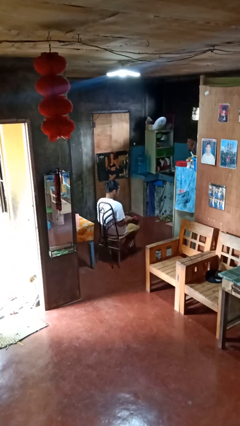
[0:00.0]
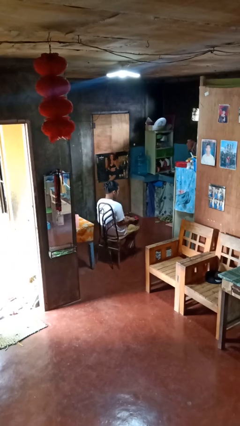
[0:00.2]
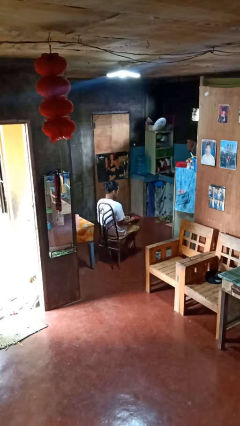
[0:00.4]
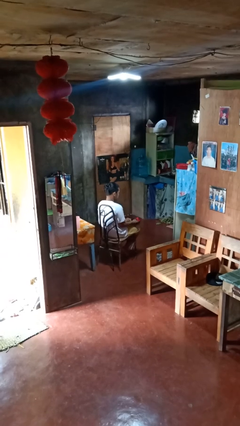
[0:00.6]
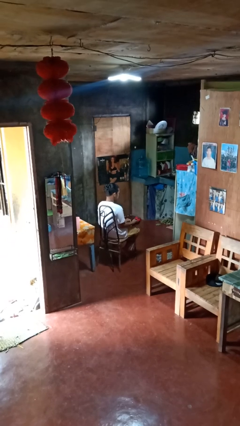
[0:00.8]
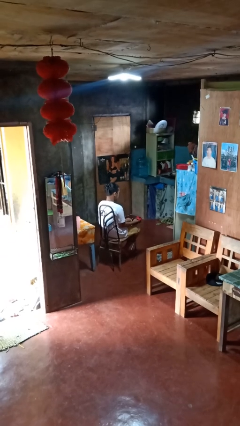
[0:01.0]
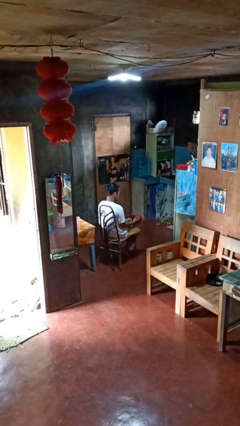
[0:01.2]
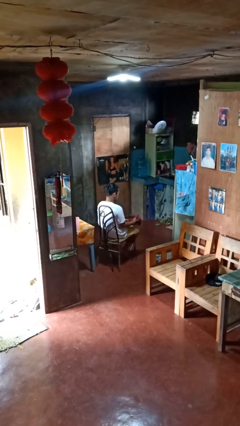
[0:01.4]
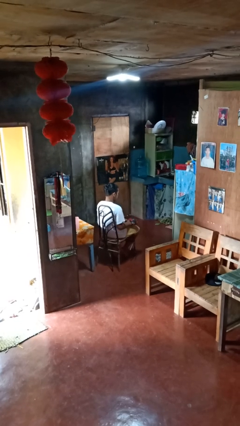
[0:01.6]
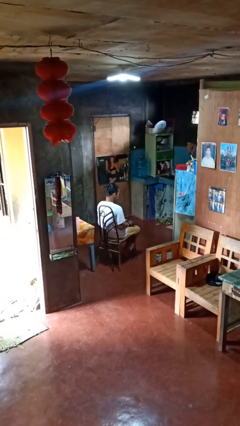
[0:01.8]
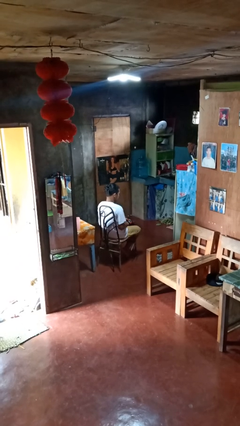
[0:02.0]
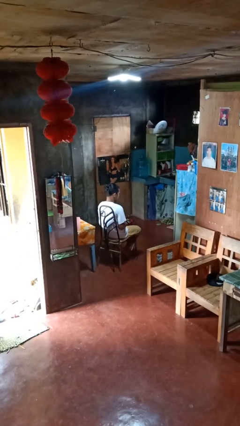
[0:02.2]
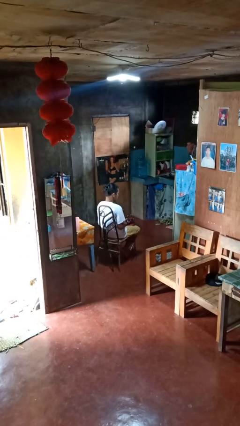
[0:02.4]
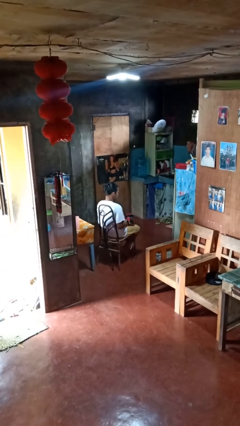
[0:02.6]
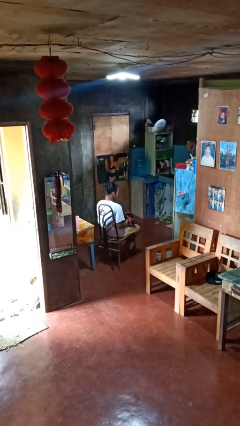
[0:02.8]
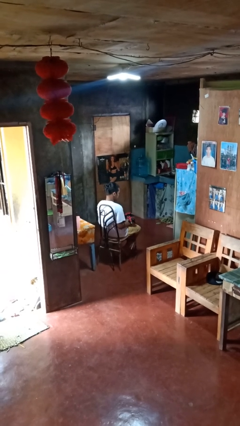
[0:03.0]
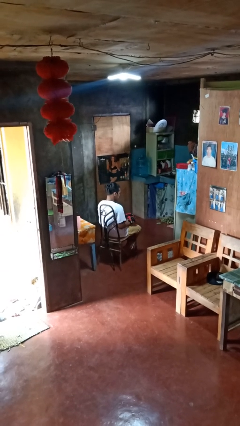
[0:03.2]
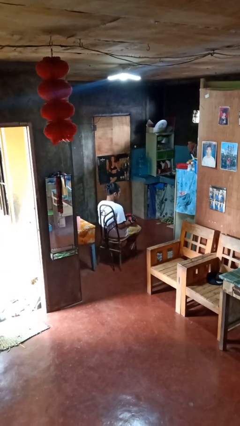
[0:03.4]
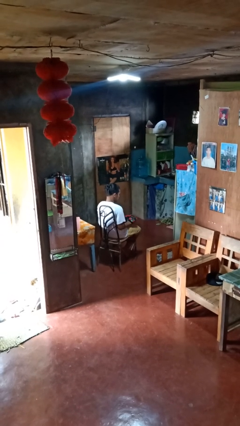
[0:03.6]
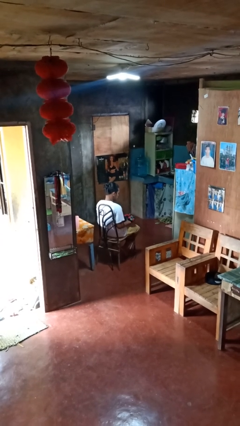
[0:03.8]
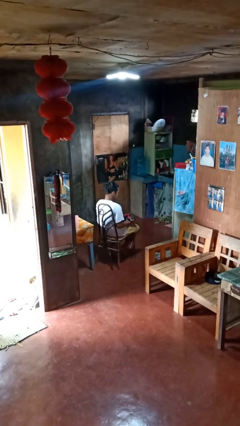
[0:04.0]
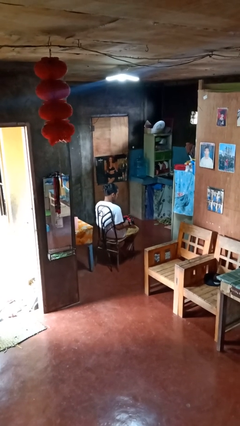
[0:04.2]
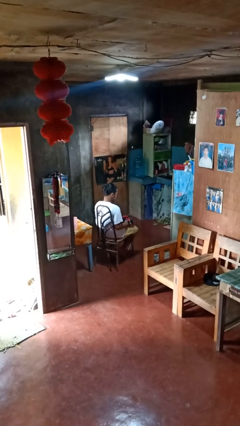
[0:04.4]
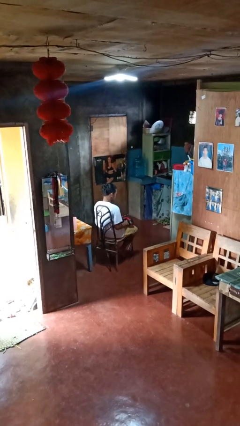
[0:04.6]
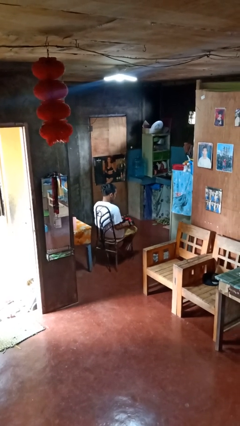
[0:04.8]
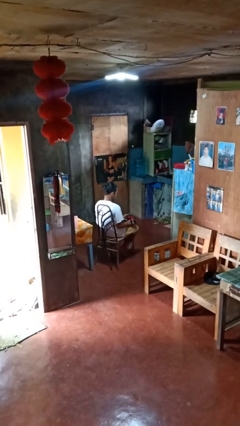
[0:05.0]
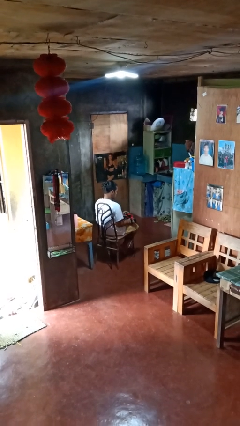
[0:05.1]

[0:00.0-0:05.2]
person puts on gloves

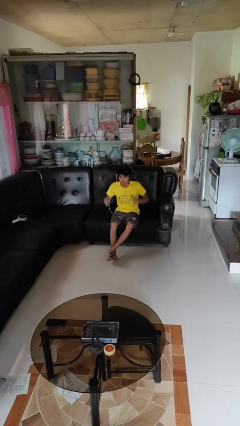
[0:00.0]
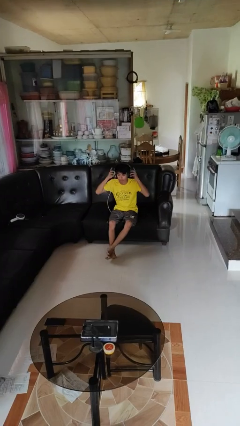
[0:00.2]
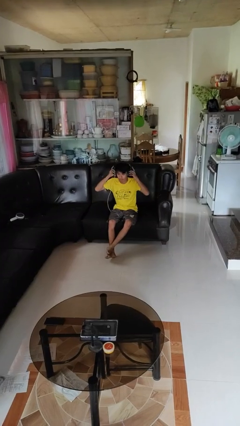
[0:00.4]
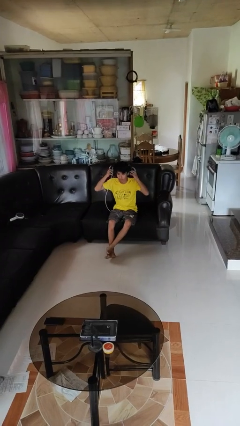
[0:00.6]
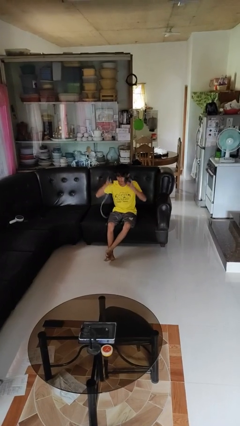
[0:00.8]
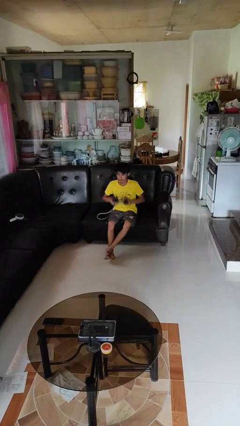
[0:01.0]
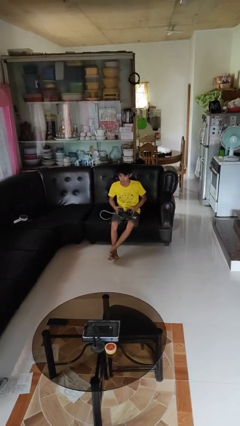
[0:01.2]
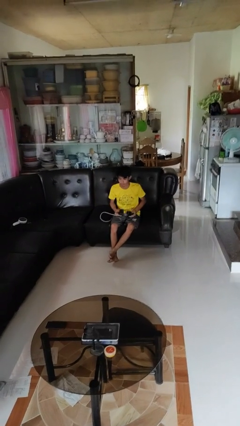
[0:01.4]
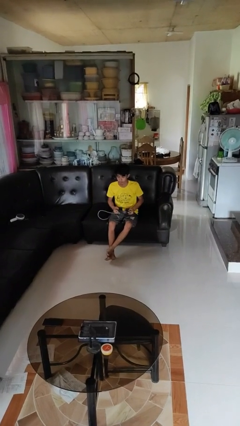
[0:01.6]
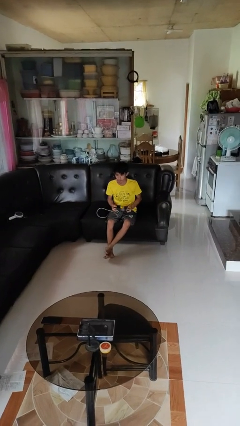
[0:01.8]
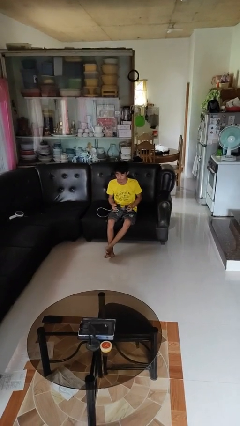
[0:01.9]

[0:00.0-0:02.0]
person takes off headphones

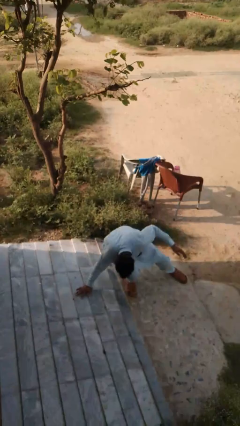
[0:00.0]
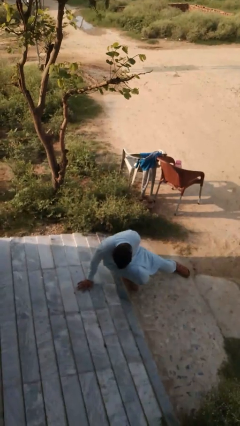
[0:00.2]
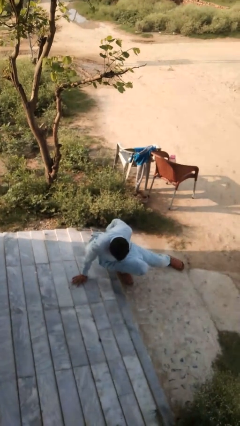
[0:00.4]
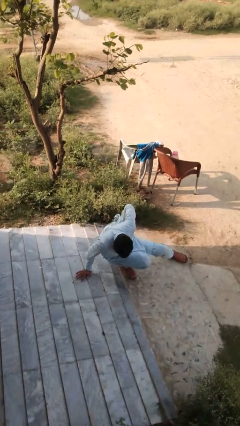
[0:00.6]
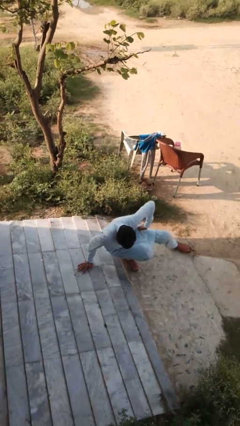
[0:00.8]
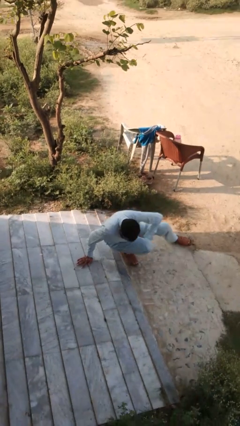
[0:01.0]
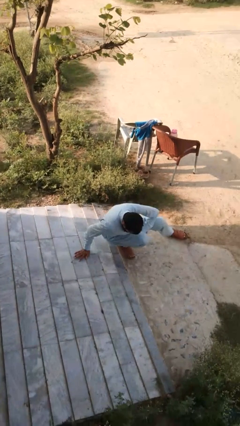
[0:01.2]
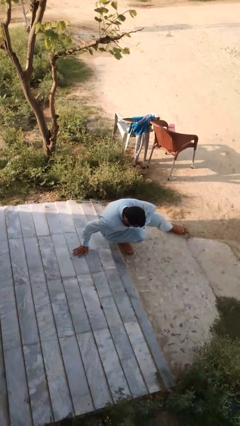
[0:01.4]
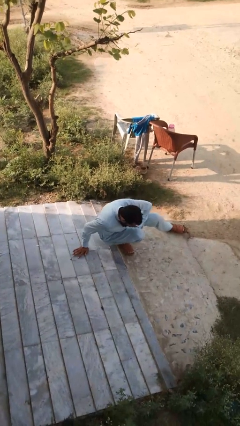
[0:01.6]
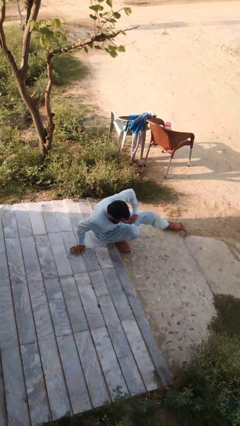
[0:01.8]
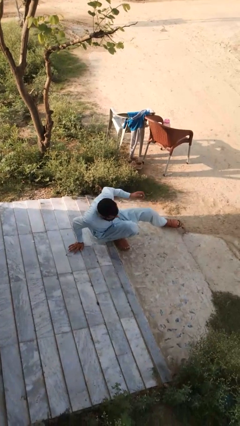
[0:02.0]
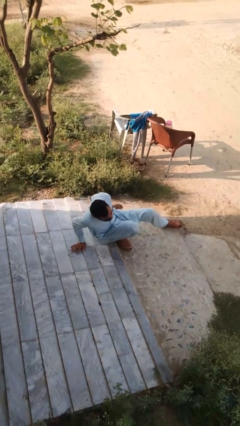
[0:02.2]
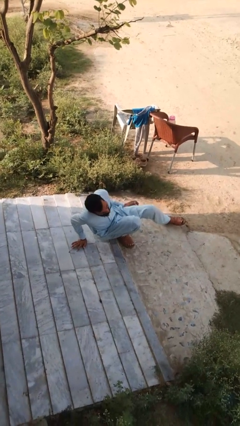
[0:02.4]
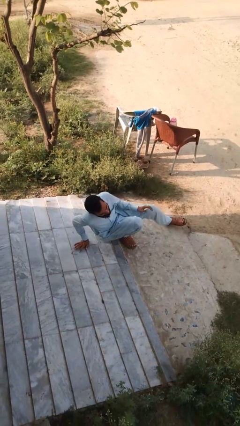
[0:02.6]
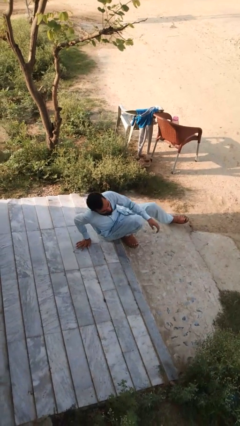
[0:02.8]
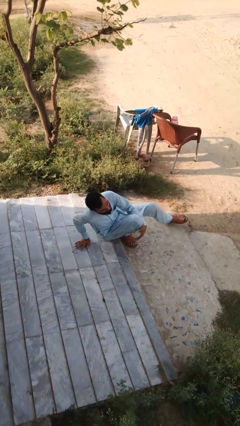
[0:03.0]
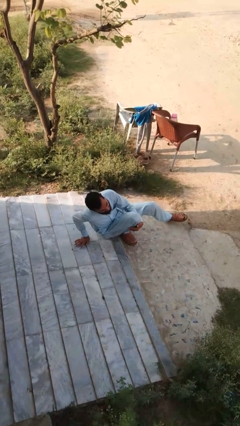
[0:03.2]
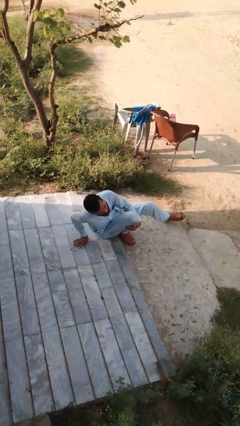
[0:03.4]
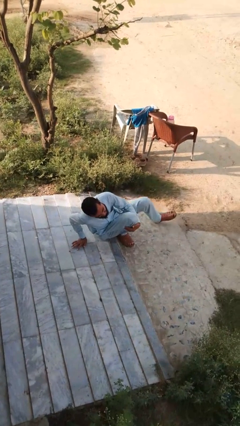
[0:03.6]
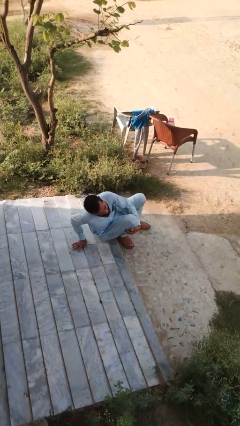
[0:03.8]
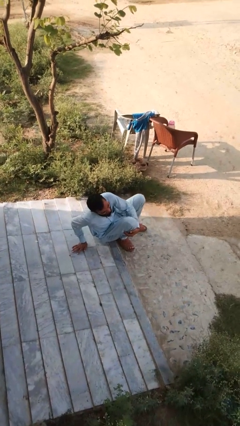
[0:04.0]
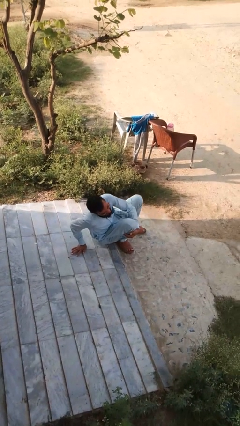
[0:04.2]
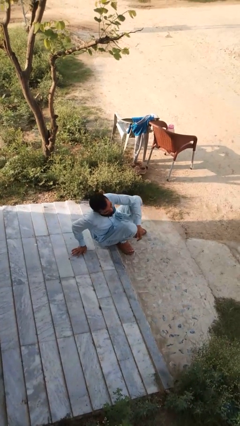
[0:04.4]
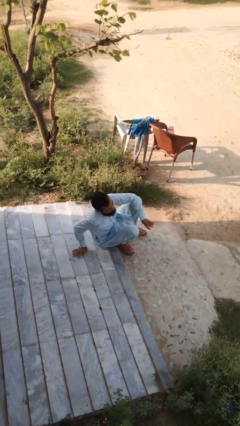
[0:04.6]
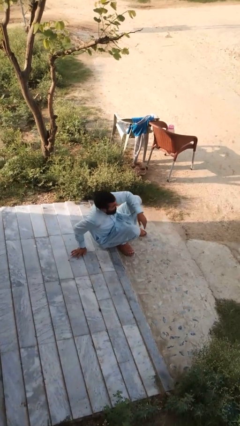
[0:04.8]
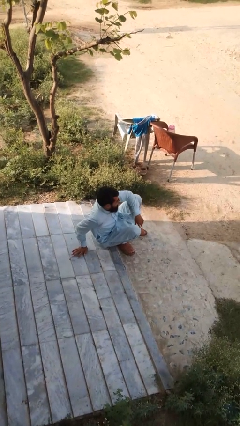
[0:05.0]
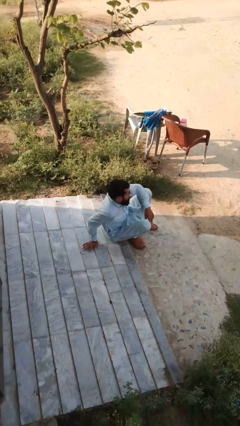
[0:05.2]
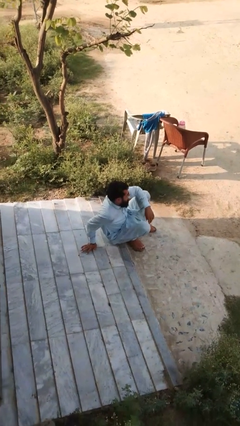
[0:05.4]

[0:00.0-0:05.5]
person lies down on floor

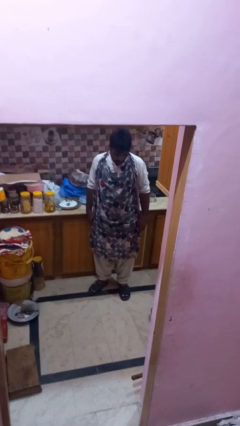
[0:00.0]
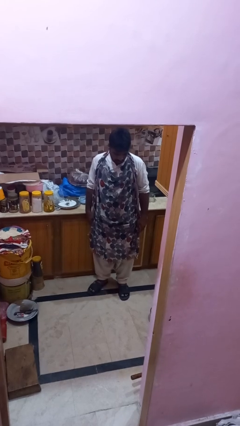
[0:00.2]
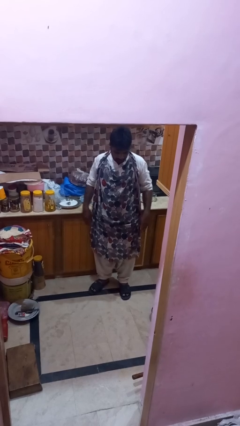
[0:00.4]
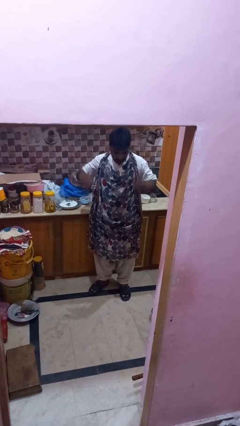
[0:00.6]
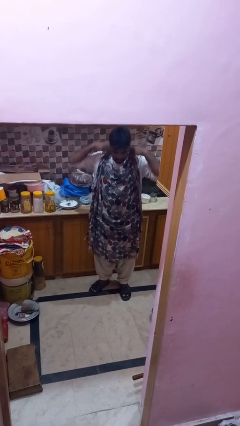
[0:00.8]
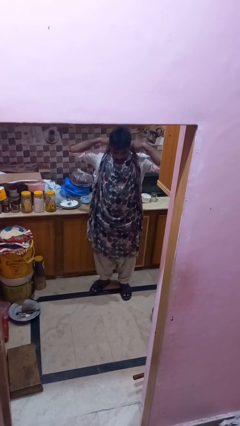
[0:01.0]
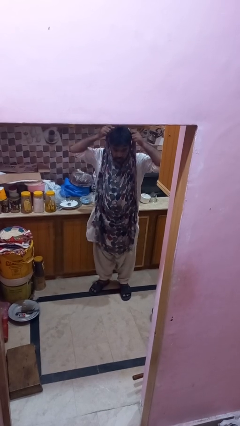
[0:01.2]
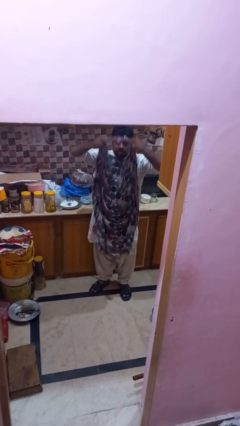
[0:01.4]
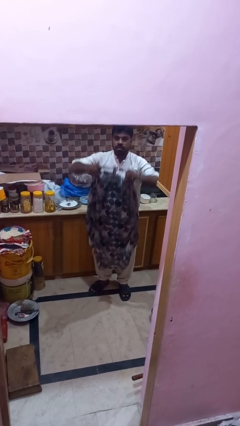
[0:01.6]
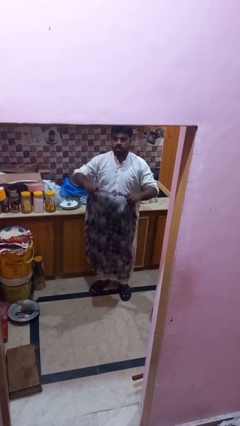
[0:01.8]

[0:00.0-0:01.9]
person takes off apron

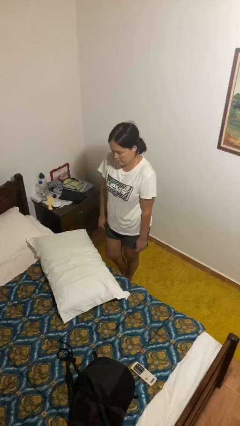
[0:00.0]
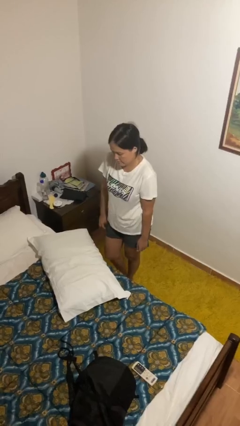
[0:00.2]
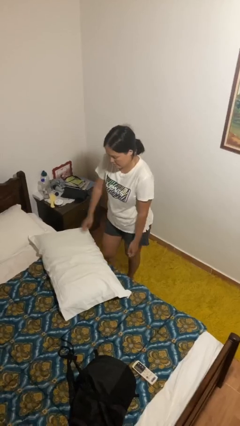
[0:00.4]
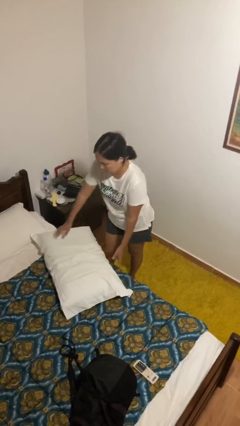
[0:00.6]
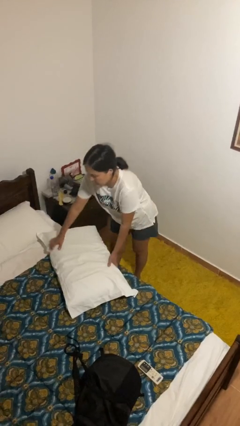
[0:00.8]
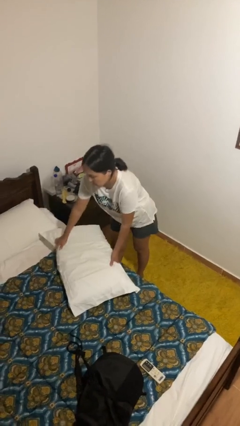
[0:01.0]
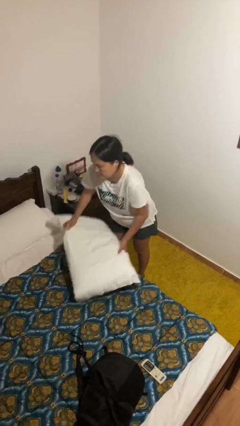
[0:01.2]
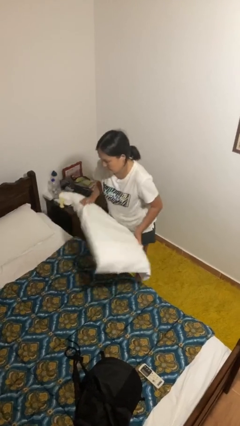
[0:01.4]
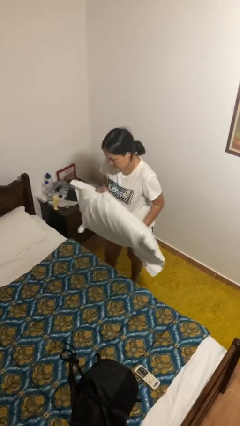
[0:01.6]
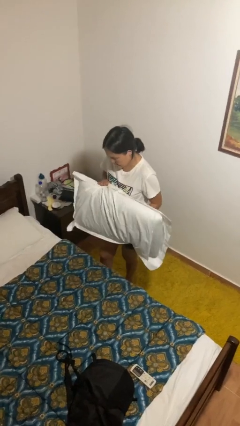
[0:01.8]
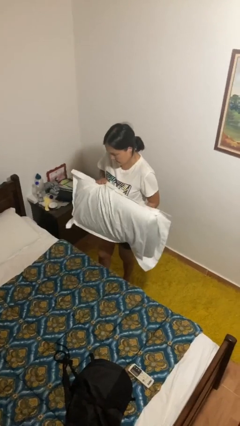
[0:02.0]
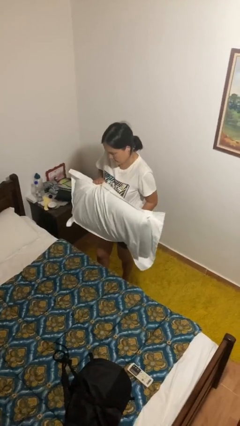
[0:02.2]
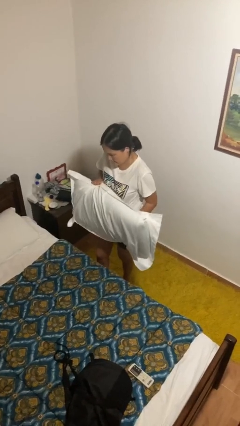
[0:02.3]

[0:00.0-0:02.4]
person picks up object from bed

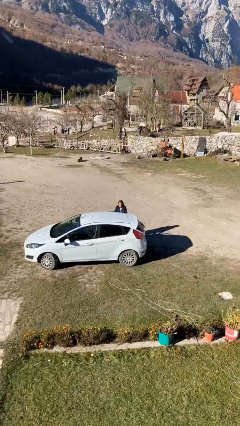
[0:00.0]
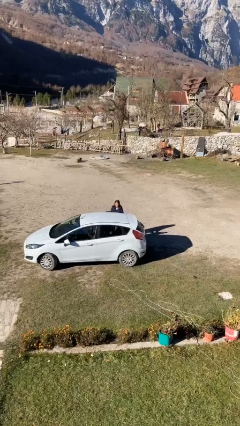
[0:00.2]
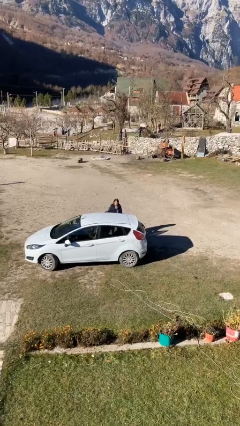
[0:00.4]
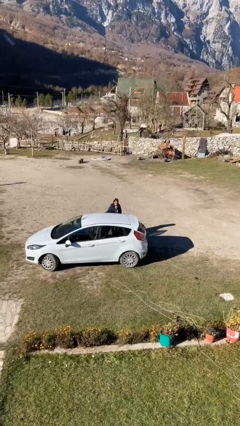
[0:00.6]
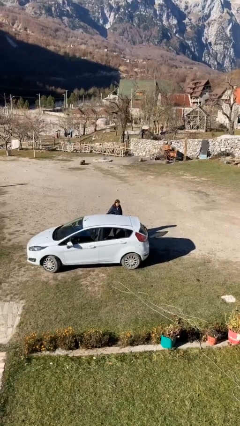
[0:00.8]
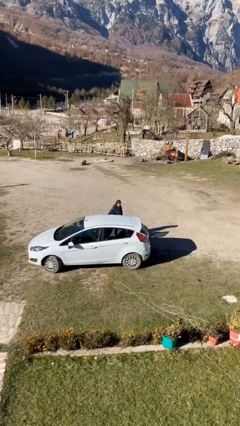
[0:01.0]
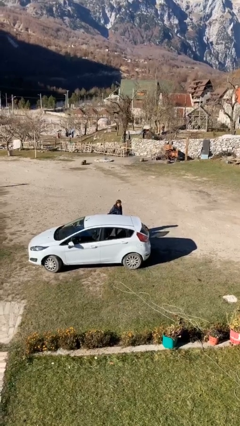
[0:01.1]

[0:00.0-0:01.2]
person opens car door
